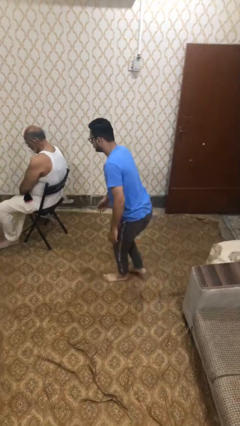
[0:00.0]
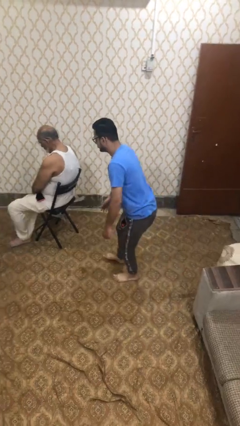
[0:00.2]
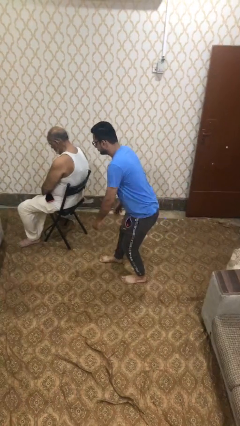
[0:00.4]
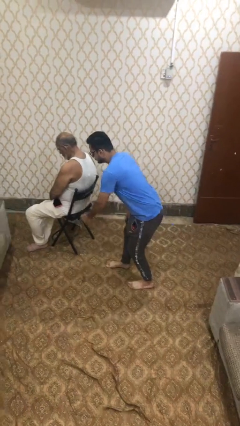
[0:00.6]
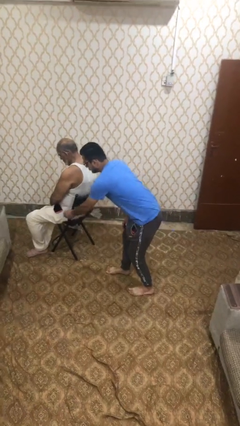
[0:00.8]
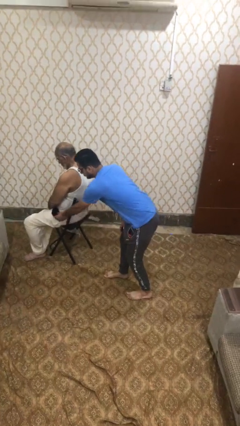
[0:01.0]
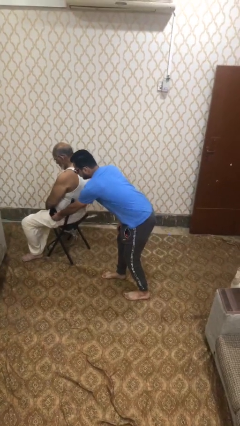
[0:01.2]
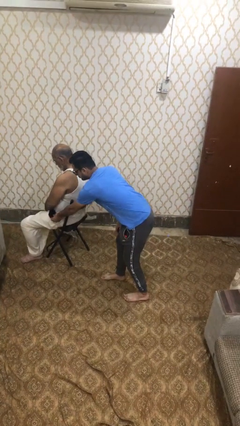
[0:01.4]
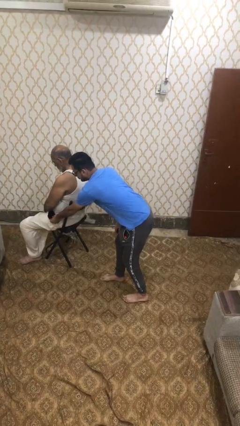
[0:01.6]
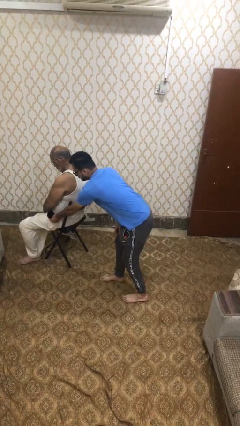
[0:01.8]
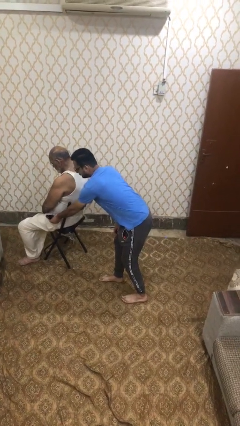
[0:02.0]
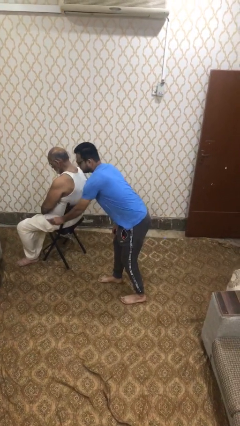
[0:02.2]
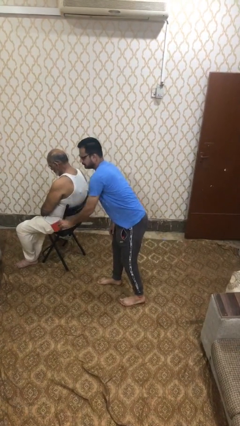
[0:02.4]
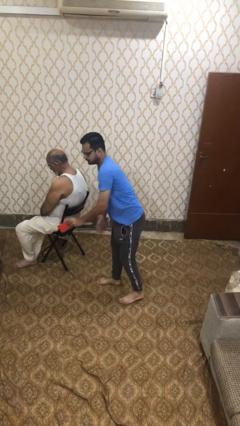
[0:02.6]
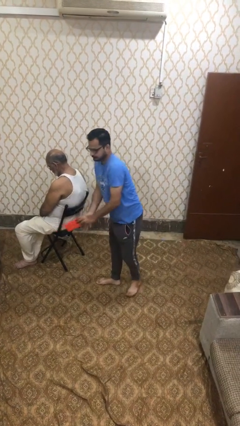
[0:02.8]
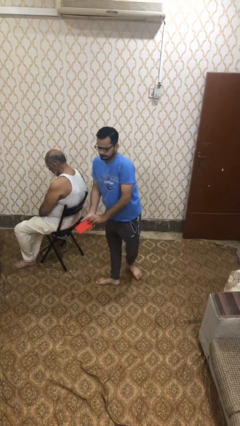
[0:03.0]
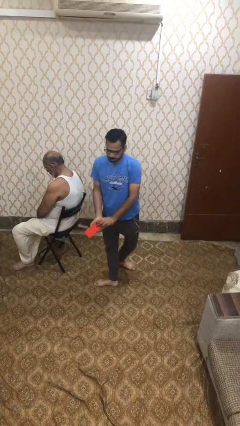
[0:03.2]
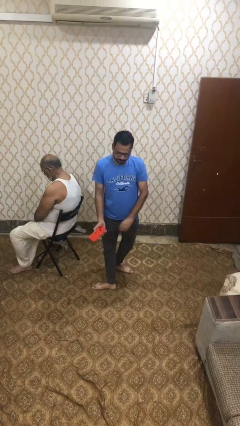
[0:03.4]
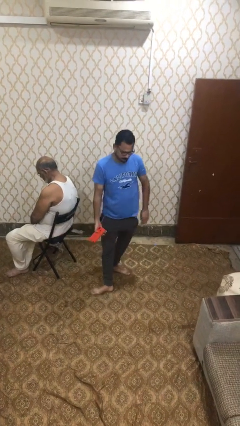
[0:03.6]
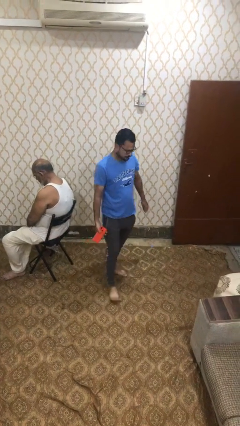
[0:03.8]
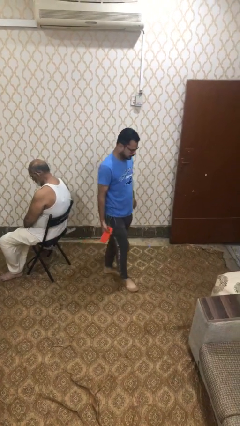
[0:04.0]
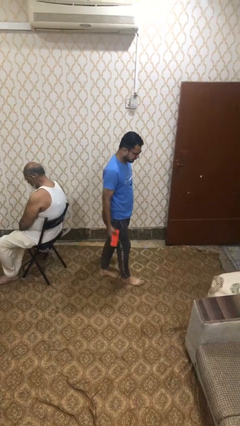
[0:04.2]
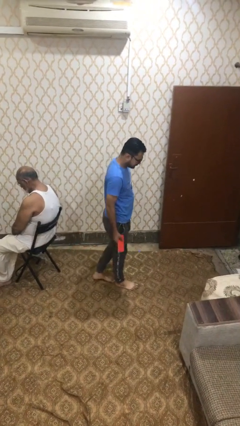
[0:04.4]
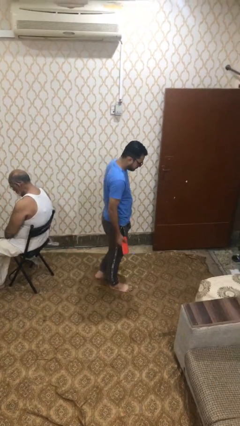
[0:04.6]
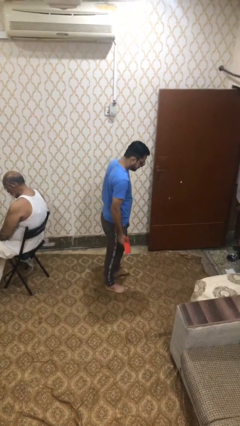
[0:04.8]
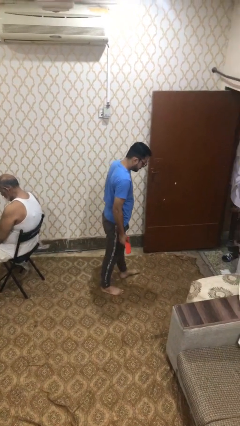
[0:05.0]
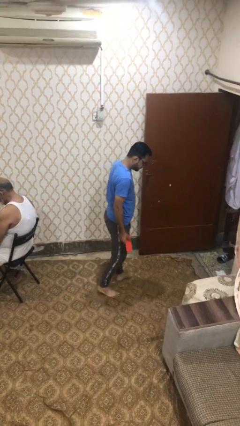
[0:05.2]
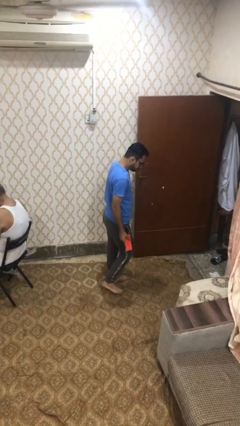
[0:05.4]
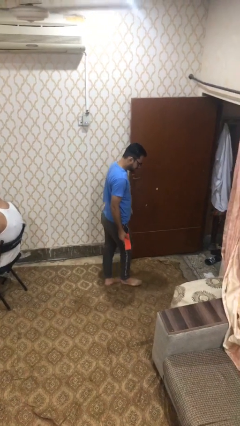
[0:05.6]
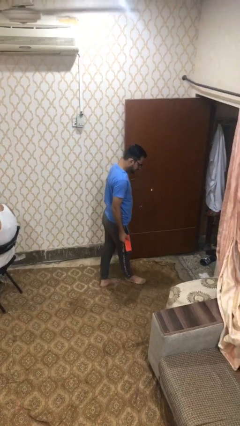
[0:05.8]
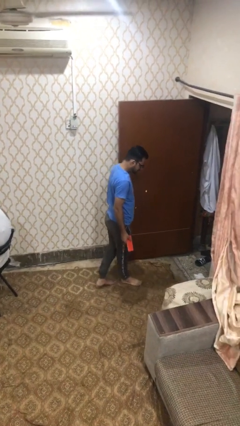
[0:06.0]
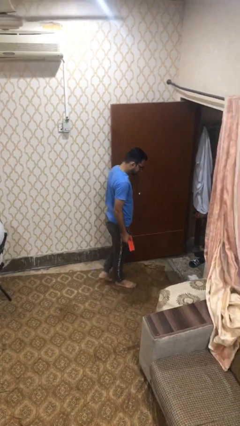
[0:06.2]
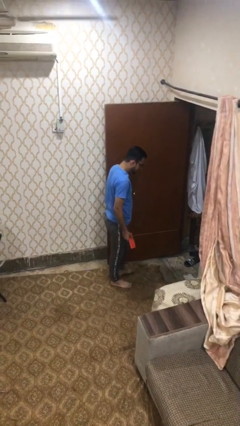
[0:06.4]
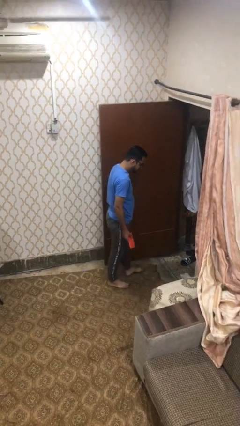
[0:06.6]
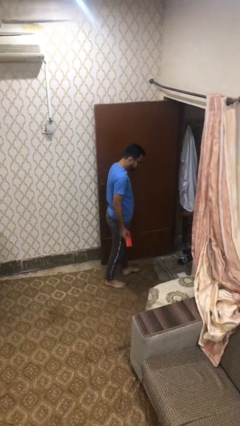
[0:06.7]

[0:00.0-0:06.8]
person steals object from person

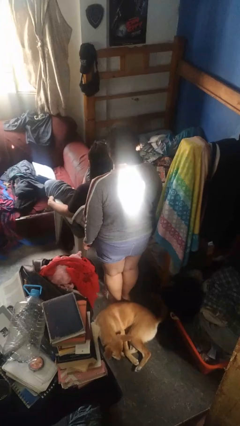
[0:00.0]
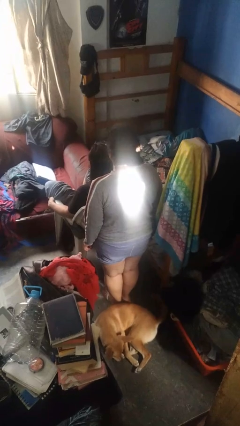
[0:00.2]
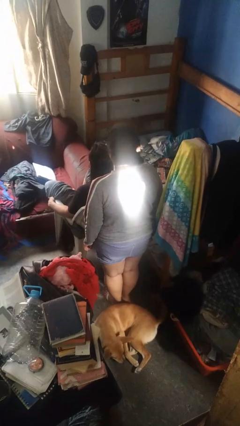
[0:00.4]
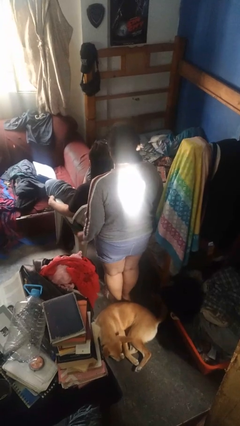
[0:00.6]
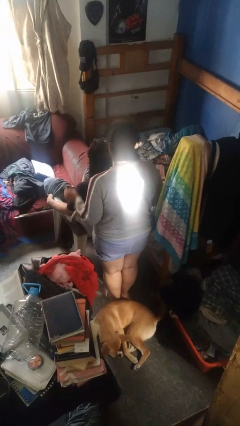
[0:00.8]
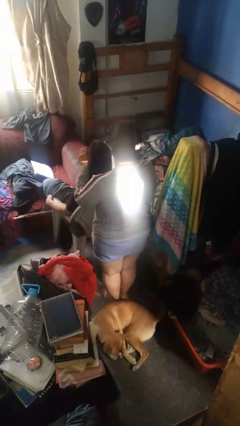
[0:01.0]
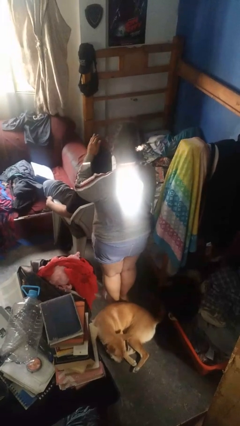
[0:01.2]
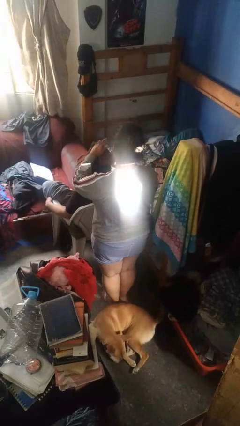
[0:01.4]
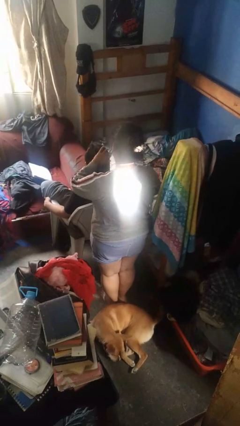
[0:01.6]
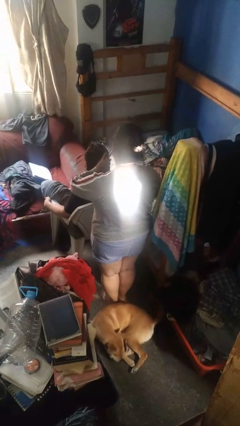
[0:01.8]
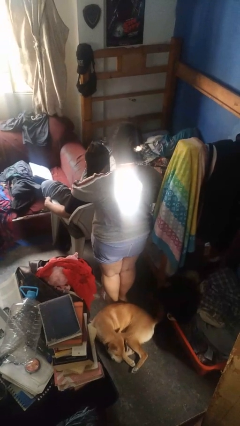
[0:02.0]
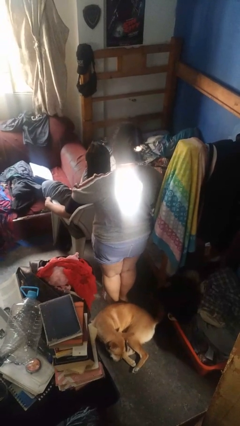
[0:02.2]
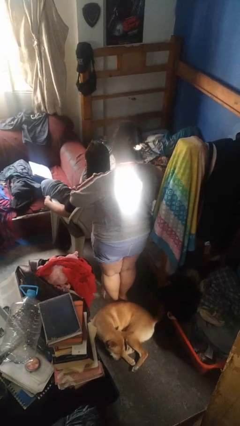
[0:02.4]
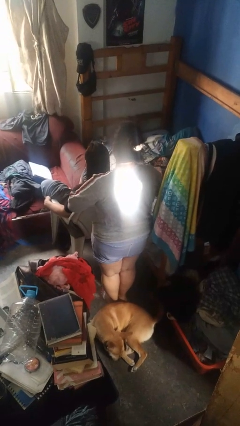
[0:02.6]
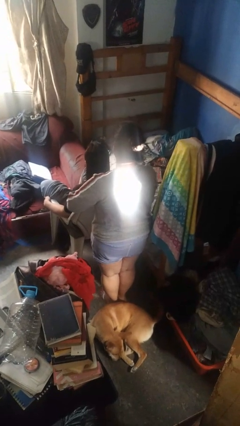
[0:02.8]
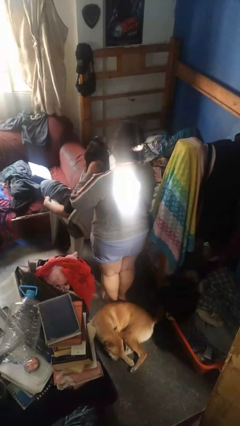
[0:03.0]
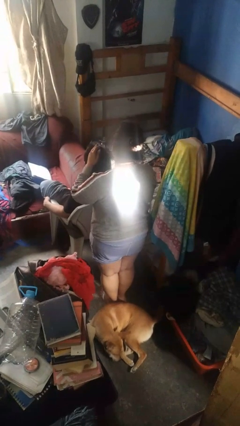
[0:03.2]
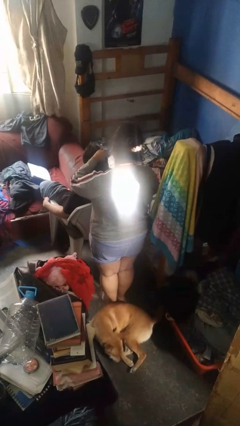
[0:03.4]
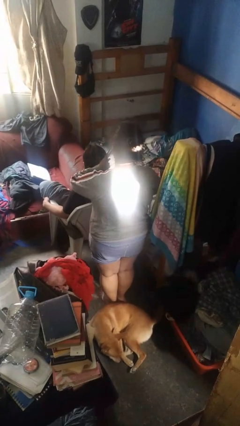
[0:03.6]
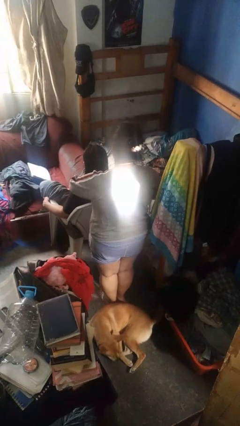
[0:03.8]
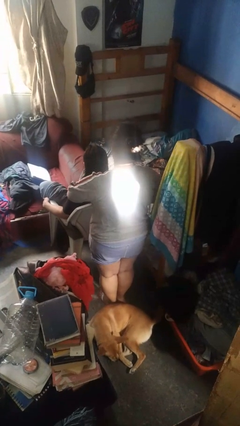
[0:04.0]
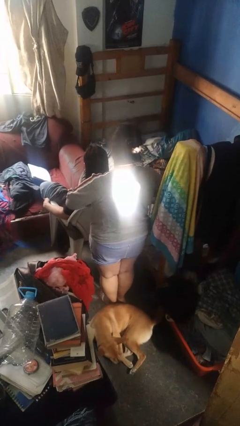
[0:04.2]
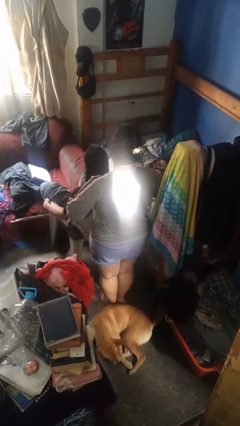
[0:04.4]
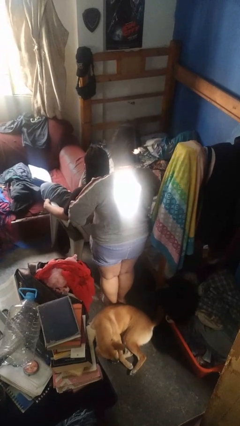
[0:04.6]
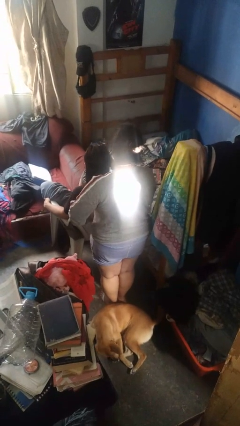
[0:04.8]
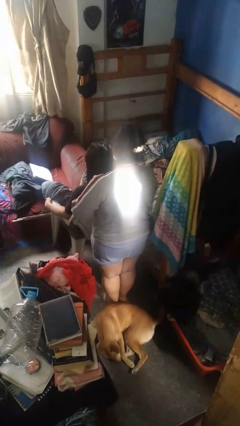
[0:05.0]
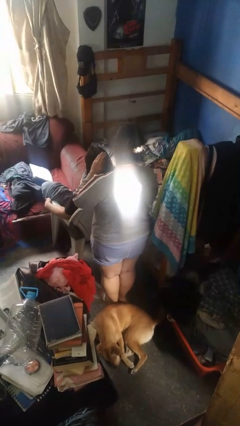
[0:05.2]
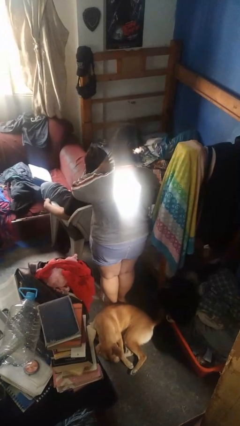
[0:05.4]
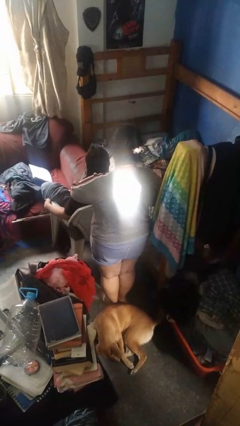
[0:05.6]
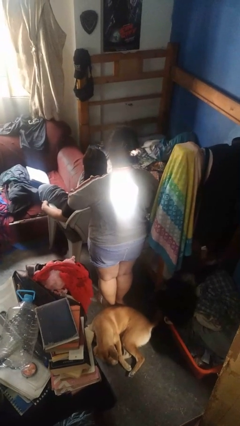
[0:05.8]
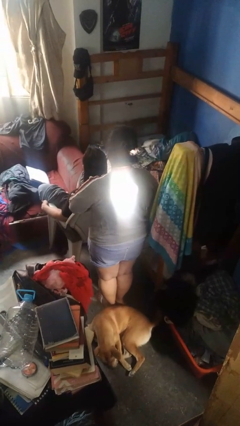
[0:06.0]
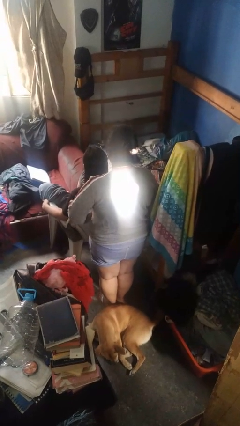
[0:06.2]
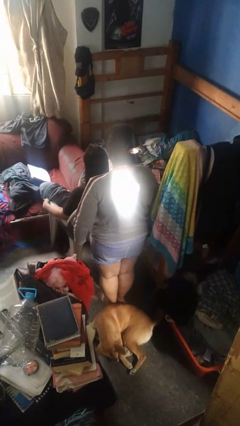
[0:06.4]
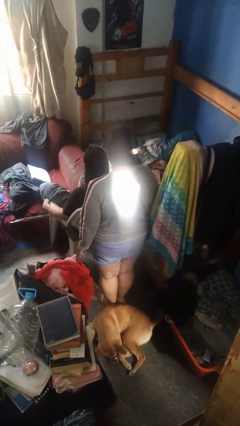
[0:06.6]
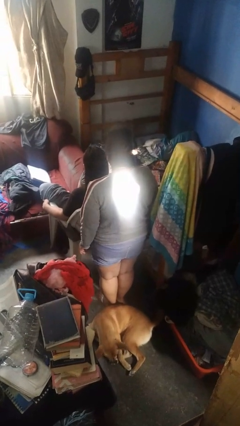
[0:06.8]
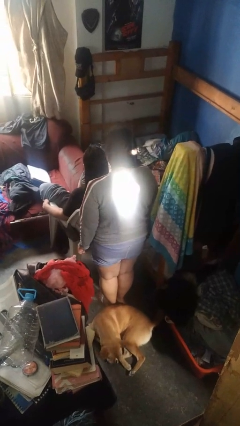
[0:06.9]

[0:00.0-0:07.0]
person brushes hair of person

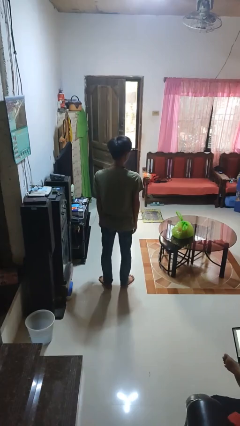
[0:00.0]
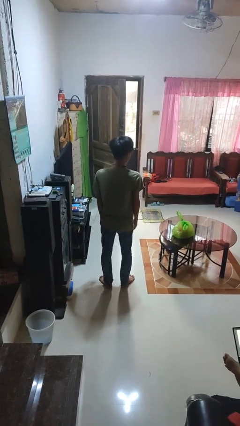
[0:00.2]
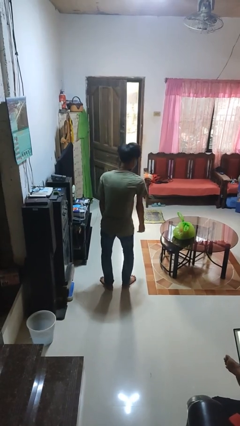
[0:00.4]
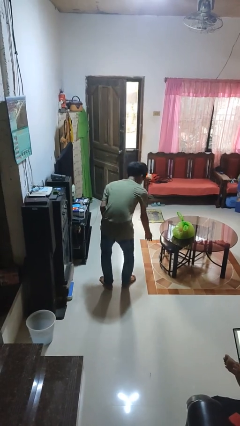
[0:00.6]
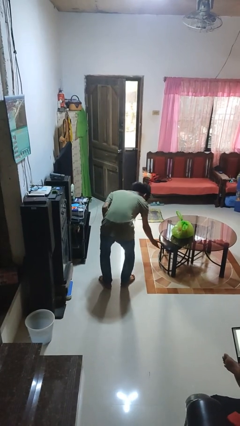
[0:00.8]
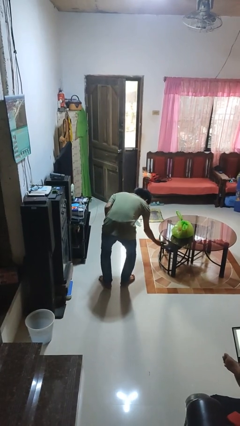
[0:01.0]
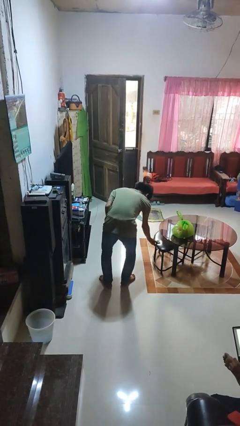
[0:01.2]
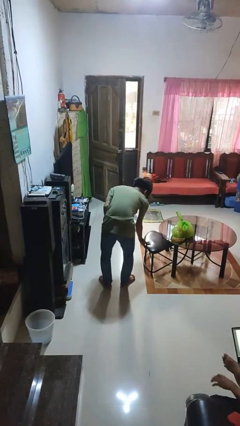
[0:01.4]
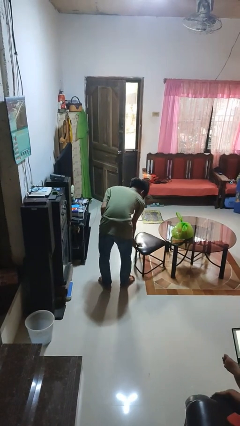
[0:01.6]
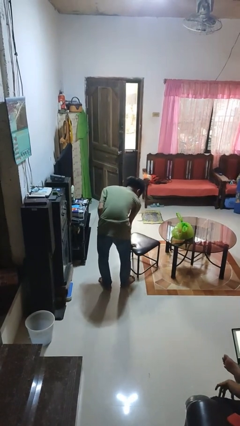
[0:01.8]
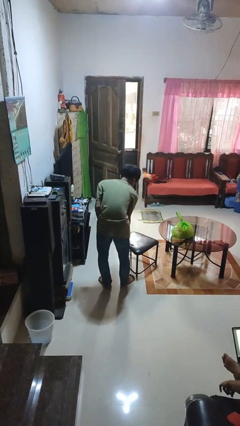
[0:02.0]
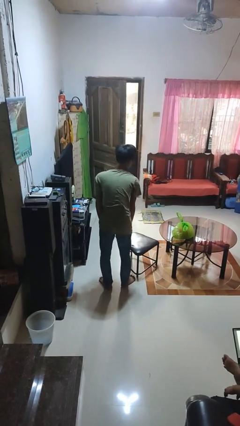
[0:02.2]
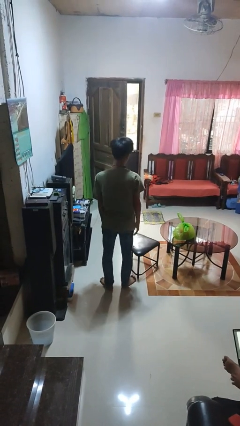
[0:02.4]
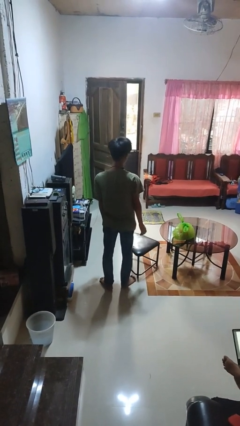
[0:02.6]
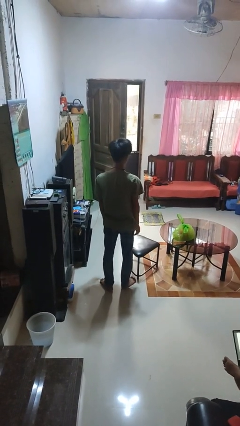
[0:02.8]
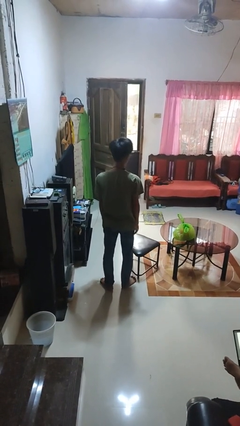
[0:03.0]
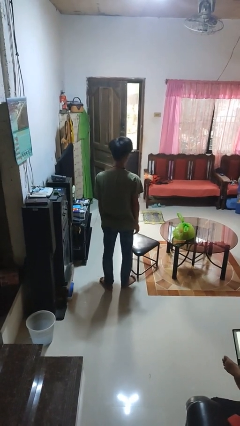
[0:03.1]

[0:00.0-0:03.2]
person pulls out chair

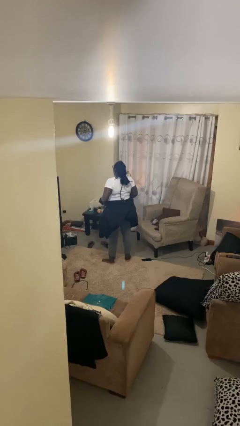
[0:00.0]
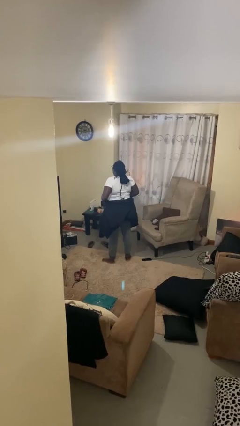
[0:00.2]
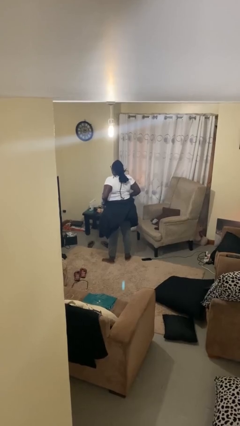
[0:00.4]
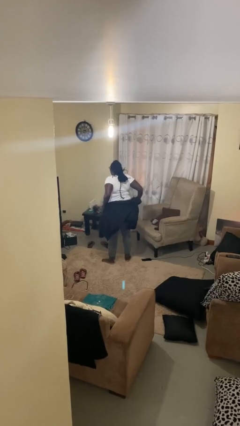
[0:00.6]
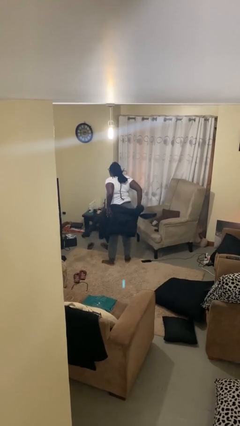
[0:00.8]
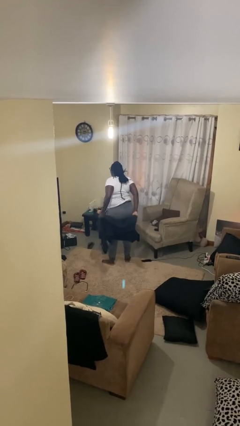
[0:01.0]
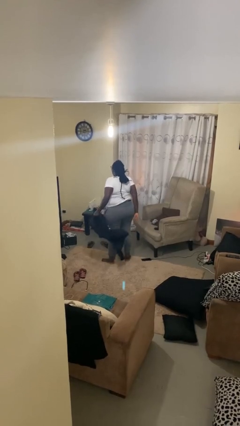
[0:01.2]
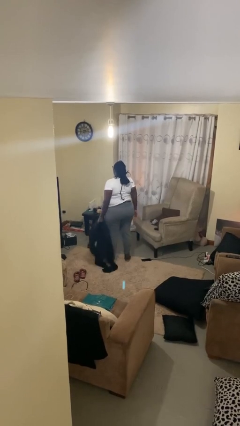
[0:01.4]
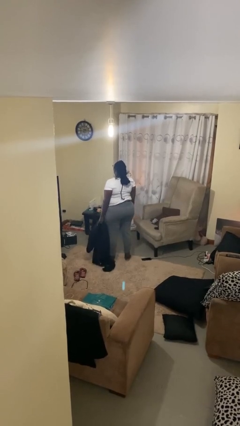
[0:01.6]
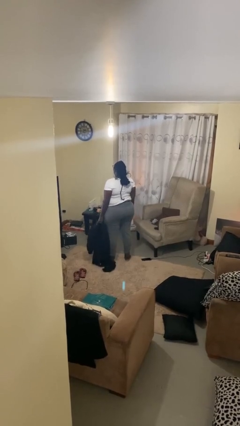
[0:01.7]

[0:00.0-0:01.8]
person unties jacket around waist
